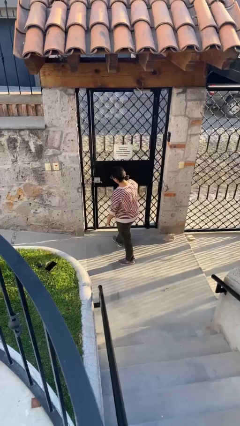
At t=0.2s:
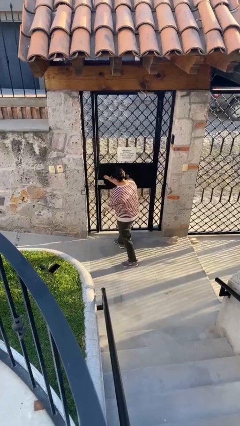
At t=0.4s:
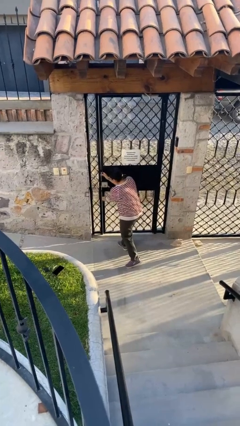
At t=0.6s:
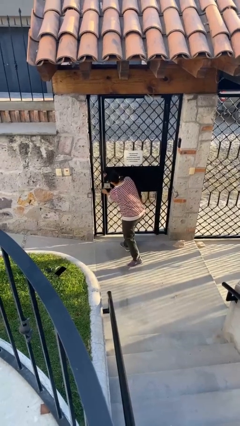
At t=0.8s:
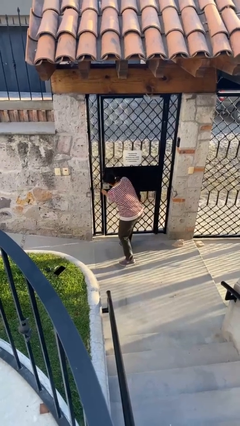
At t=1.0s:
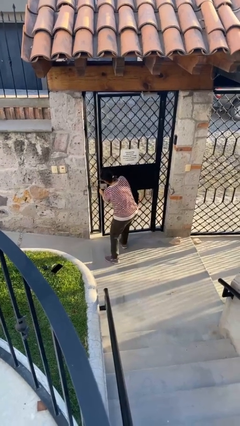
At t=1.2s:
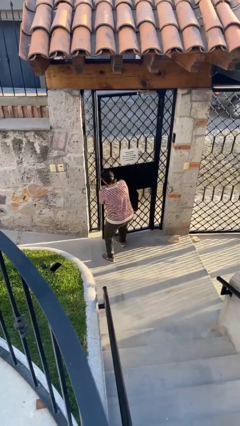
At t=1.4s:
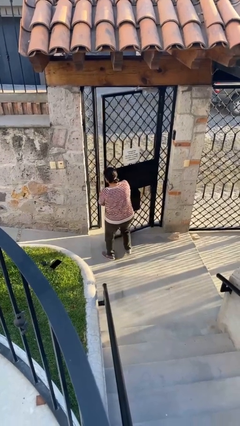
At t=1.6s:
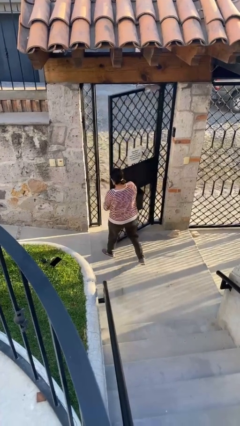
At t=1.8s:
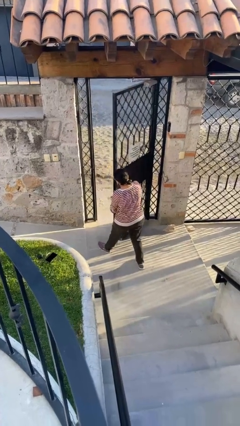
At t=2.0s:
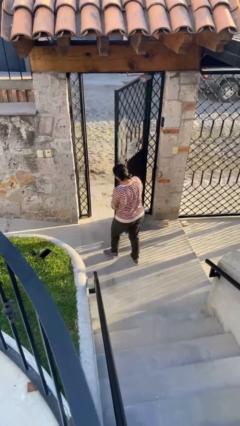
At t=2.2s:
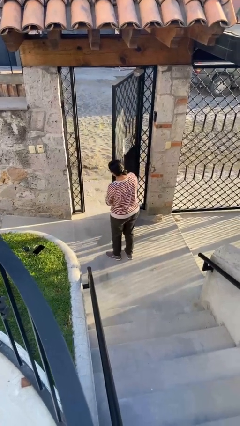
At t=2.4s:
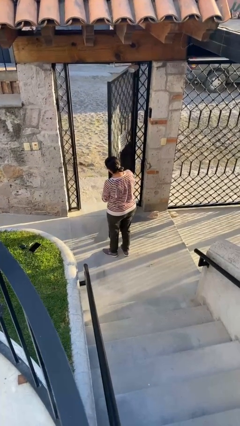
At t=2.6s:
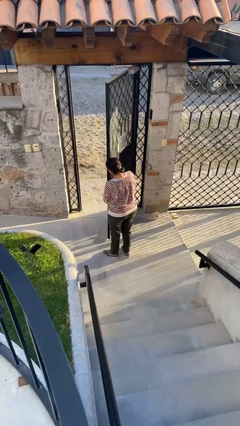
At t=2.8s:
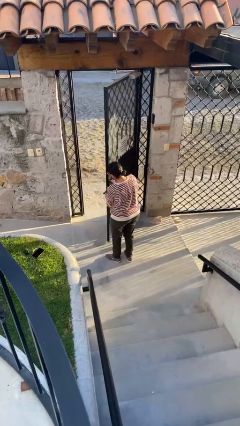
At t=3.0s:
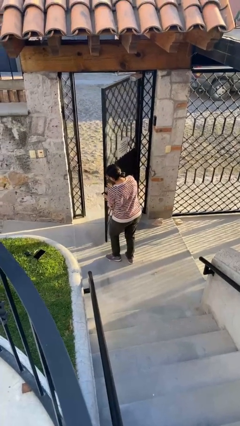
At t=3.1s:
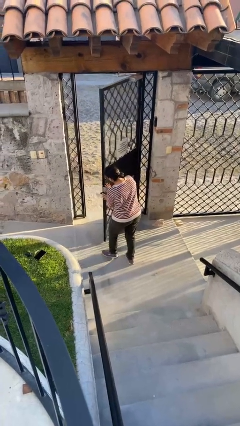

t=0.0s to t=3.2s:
person opens facility door

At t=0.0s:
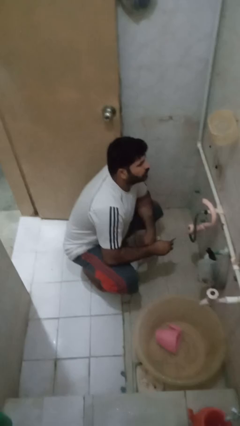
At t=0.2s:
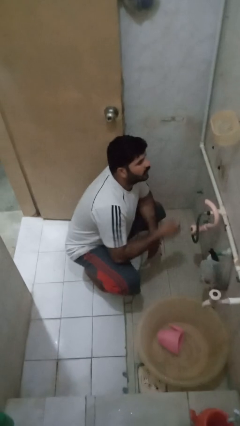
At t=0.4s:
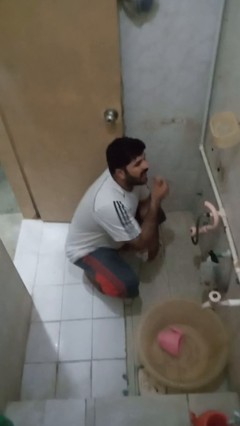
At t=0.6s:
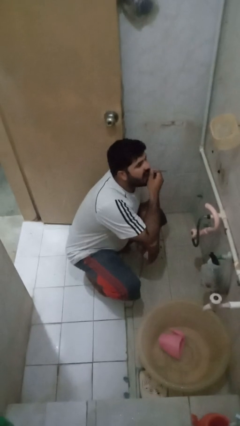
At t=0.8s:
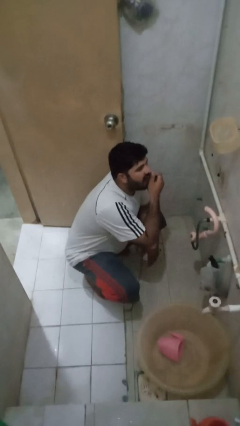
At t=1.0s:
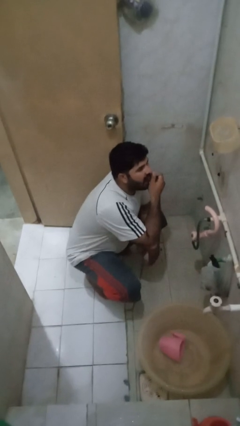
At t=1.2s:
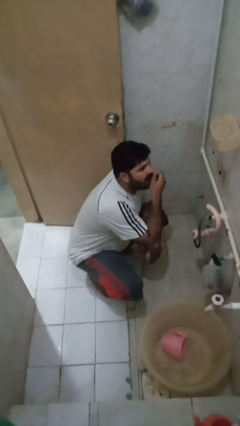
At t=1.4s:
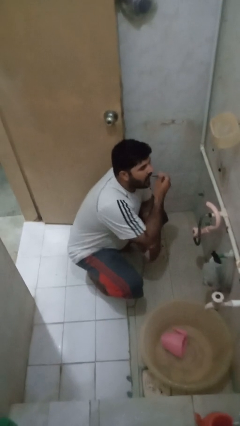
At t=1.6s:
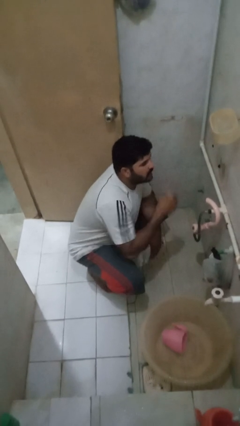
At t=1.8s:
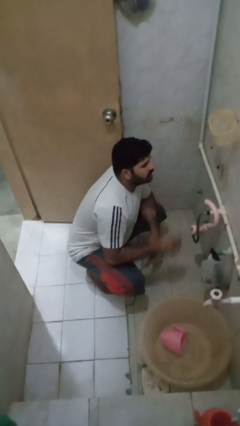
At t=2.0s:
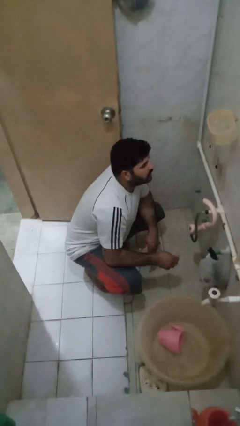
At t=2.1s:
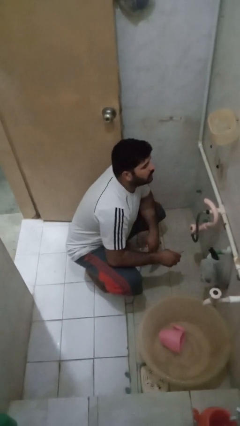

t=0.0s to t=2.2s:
person flosses

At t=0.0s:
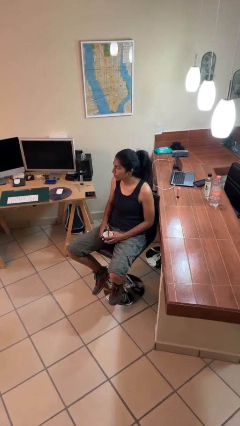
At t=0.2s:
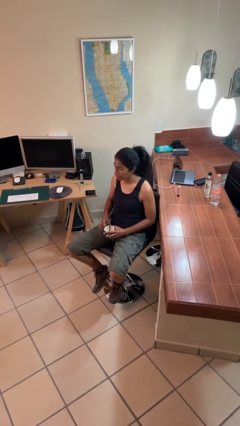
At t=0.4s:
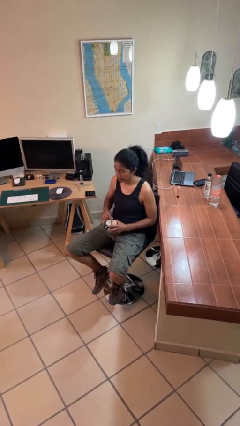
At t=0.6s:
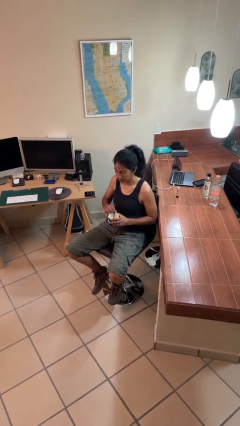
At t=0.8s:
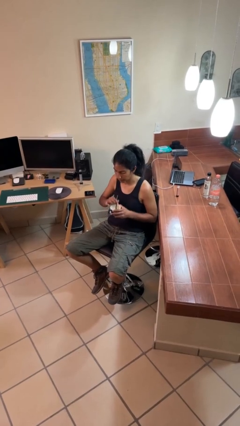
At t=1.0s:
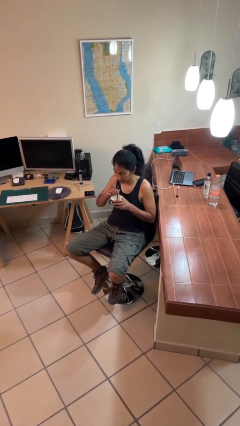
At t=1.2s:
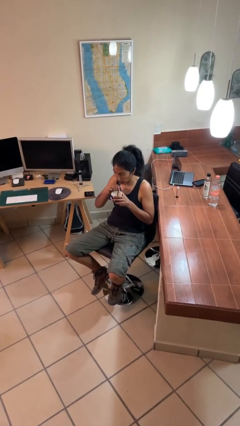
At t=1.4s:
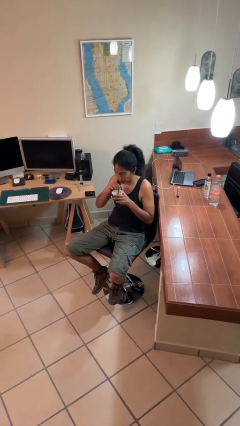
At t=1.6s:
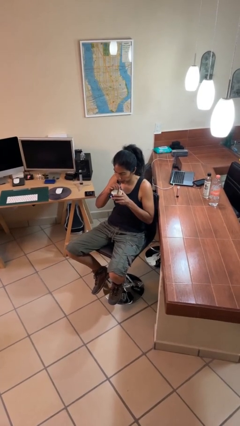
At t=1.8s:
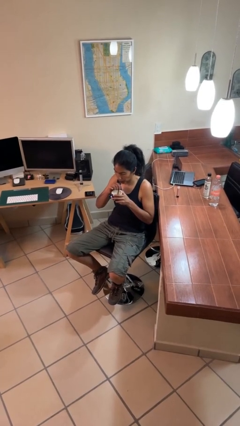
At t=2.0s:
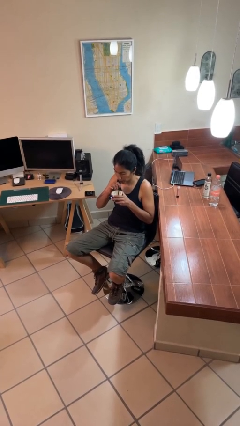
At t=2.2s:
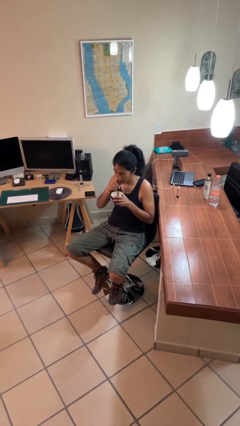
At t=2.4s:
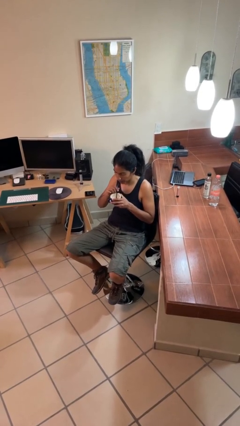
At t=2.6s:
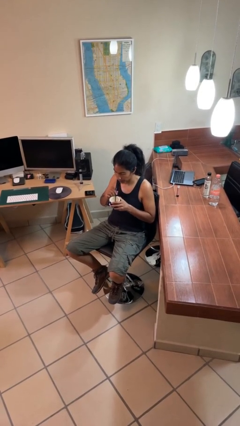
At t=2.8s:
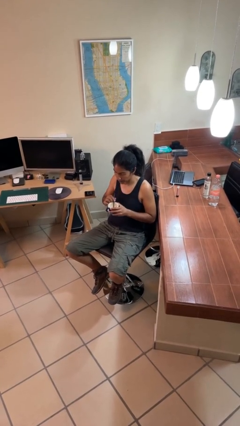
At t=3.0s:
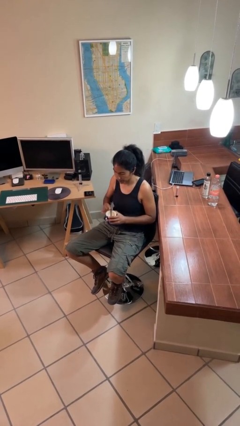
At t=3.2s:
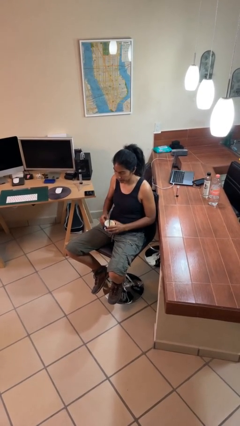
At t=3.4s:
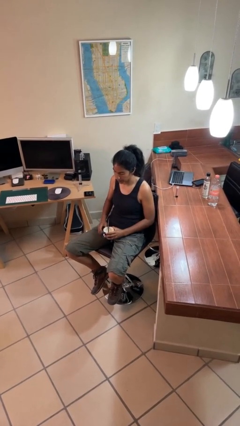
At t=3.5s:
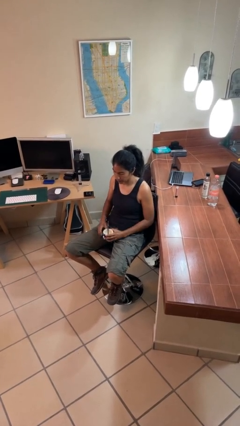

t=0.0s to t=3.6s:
person drinks from straw

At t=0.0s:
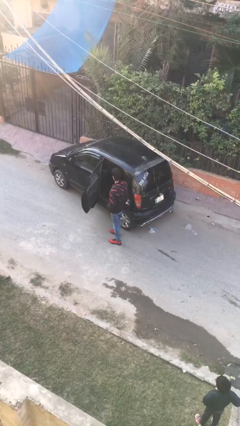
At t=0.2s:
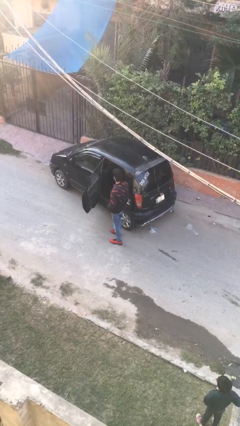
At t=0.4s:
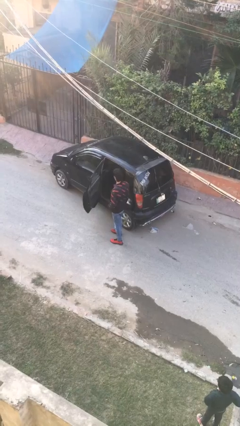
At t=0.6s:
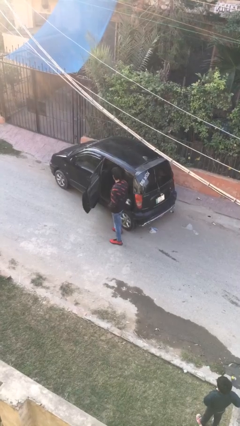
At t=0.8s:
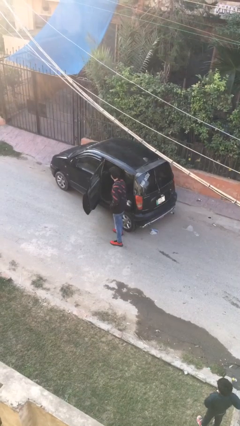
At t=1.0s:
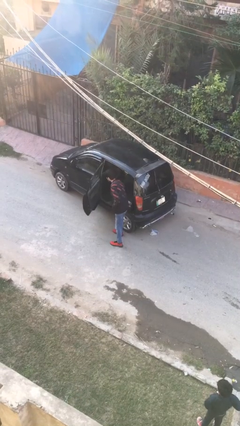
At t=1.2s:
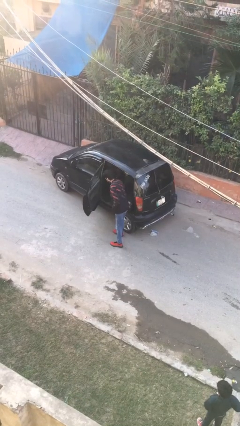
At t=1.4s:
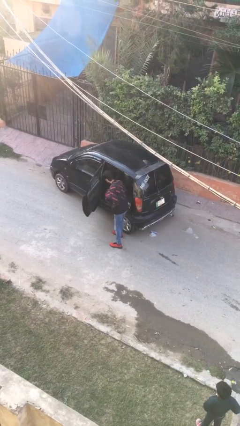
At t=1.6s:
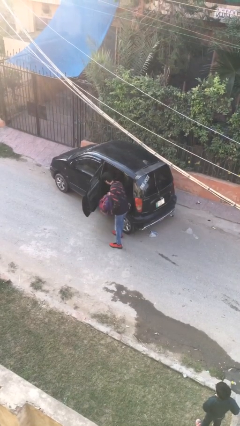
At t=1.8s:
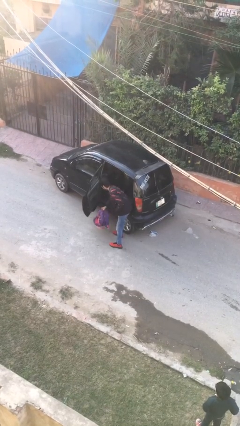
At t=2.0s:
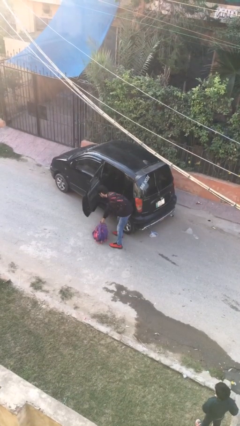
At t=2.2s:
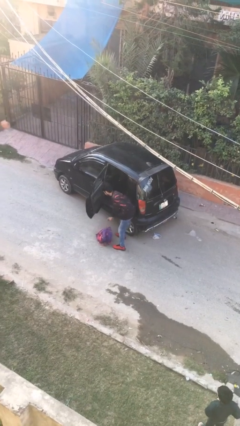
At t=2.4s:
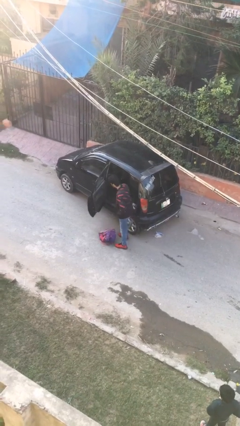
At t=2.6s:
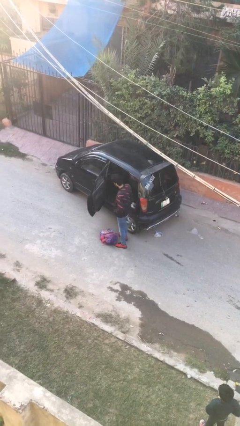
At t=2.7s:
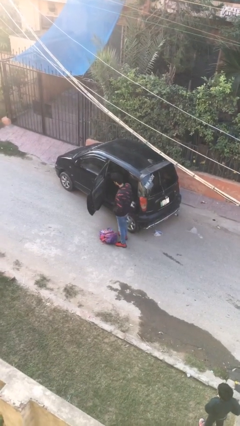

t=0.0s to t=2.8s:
person unloads car

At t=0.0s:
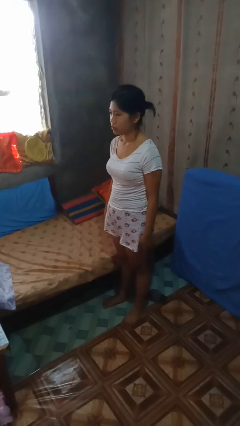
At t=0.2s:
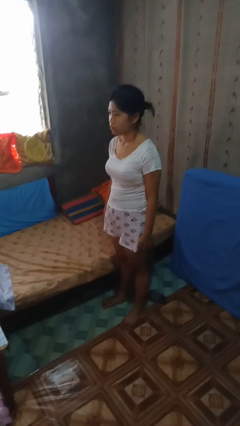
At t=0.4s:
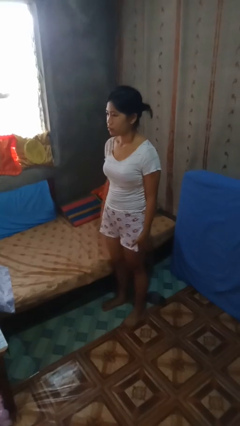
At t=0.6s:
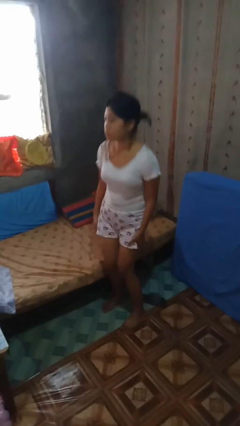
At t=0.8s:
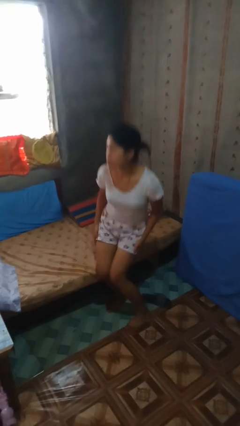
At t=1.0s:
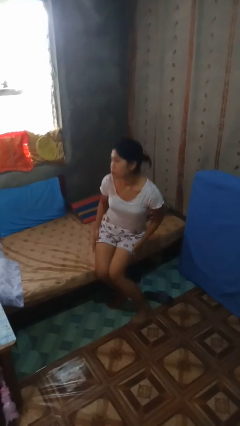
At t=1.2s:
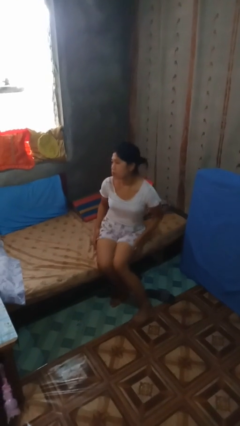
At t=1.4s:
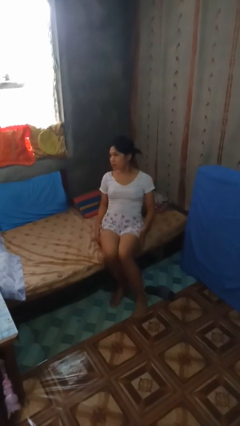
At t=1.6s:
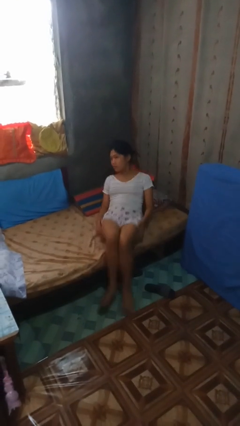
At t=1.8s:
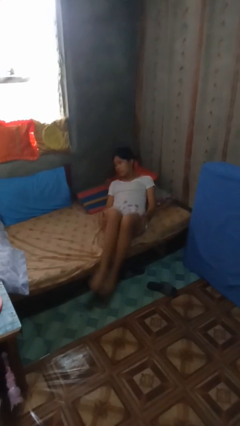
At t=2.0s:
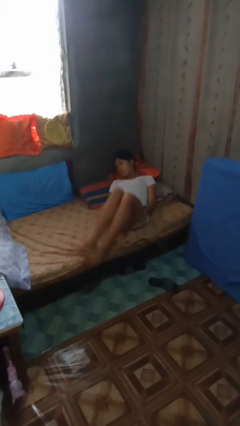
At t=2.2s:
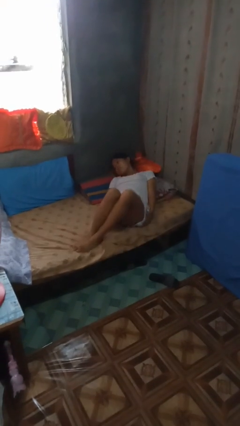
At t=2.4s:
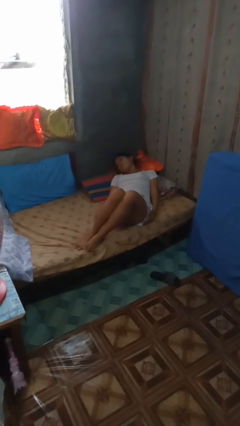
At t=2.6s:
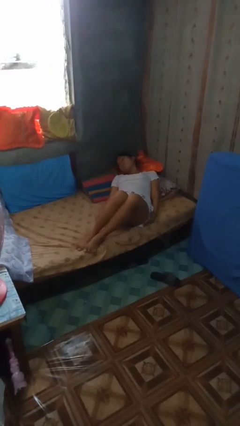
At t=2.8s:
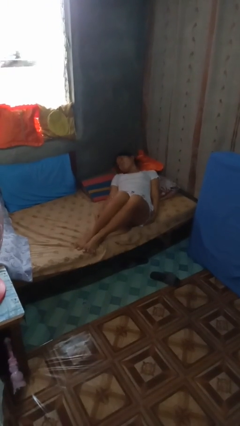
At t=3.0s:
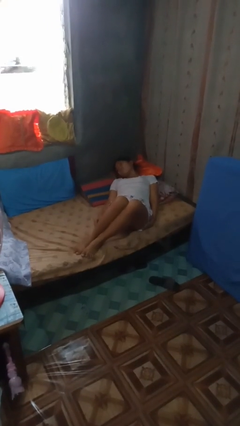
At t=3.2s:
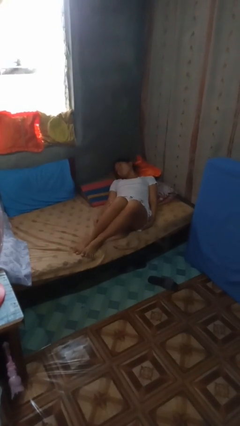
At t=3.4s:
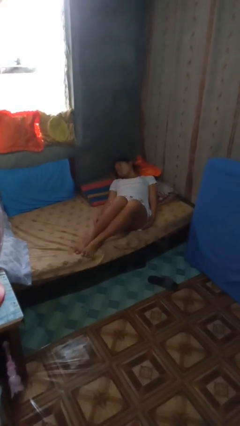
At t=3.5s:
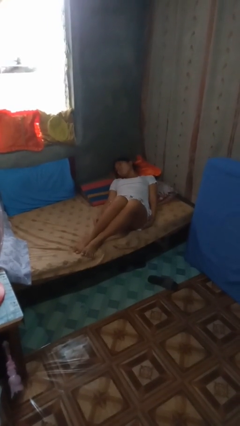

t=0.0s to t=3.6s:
person lies down on bed

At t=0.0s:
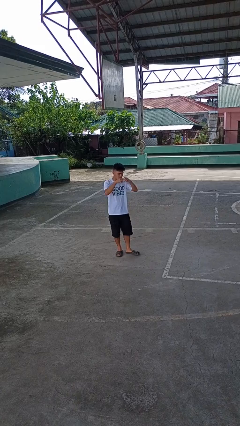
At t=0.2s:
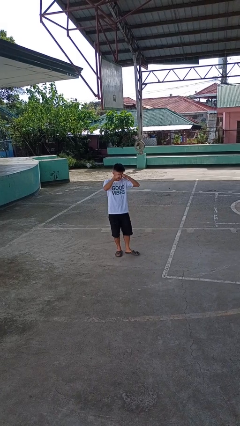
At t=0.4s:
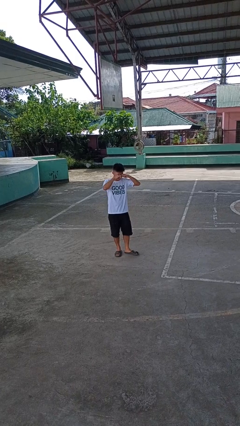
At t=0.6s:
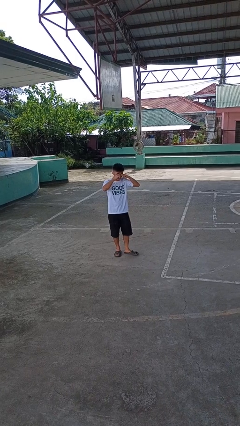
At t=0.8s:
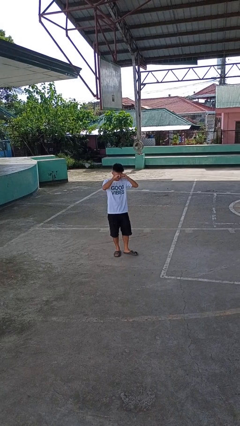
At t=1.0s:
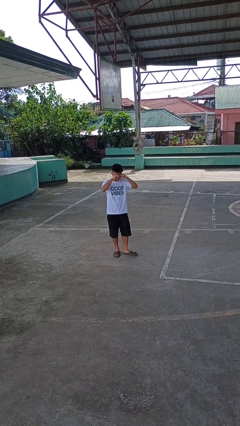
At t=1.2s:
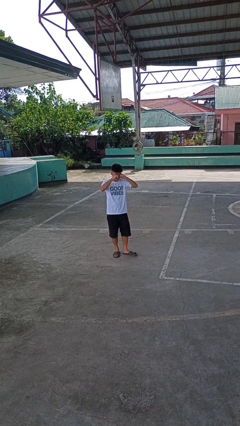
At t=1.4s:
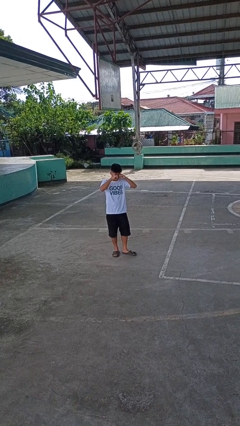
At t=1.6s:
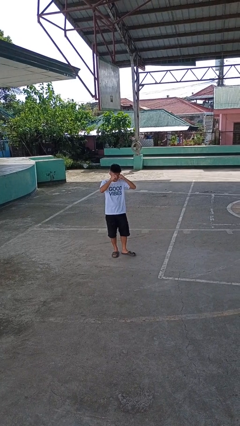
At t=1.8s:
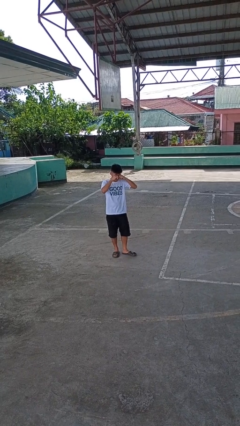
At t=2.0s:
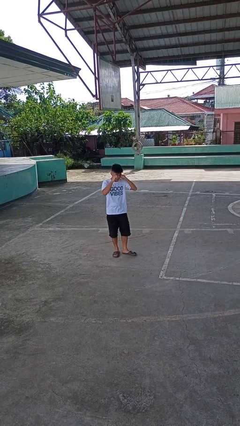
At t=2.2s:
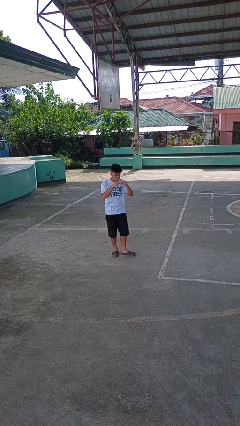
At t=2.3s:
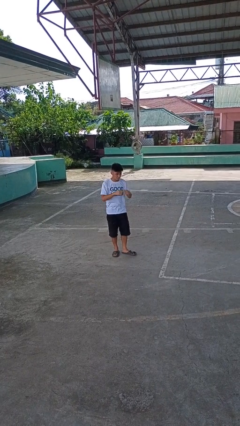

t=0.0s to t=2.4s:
person rubs eyes
